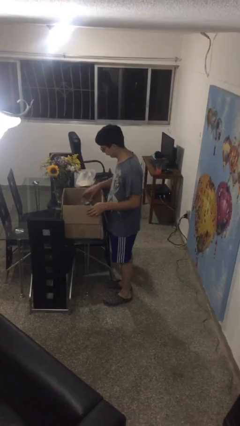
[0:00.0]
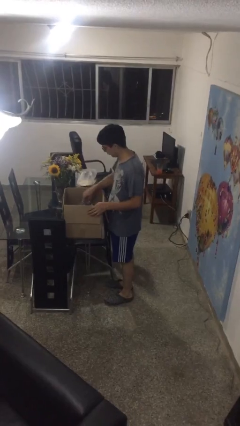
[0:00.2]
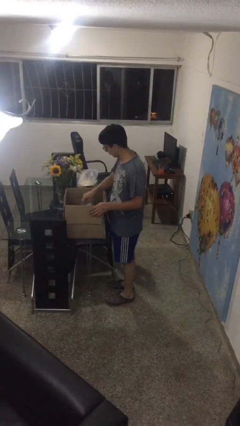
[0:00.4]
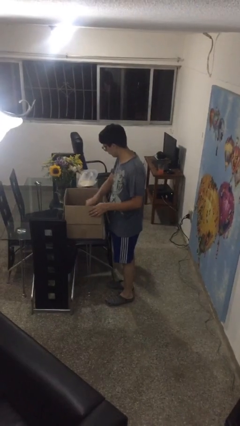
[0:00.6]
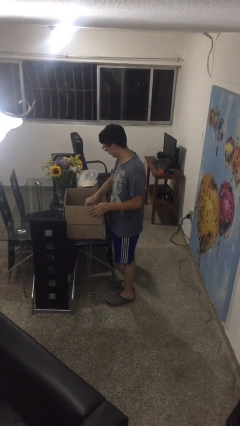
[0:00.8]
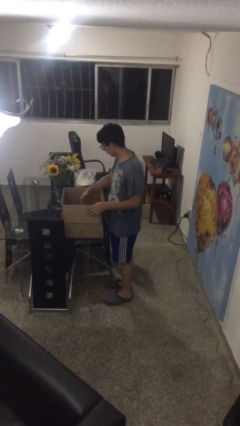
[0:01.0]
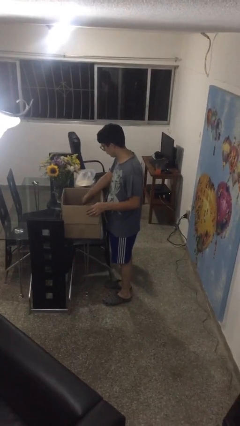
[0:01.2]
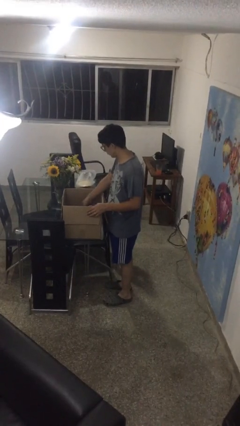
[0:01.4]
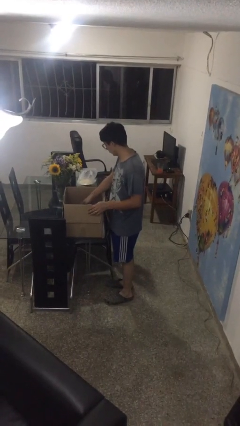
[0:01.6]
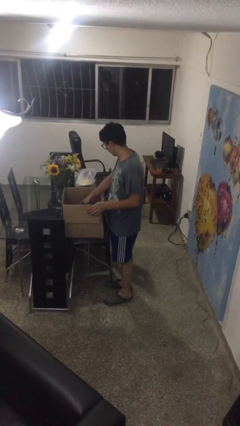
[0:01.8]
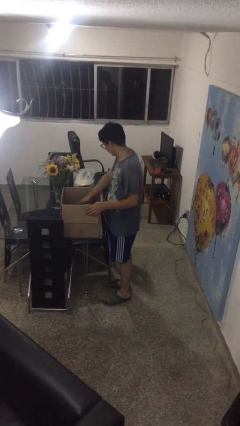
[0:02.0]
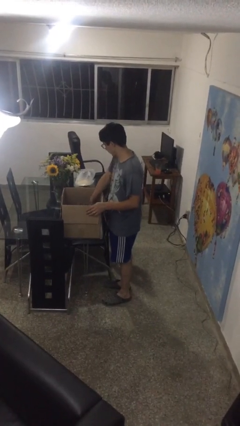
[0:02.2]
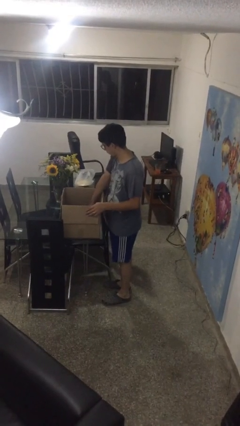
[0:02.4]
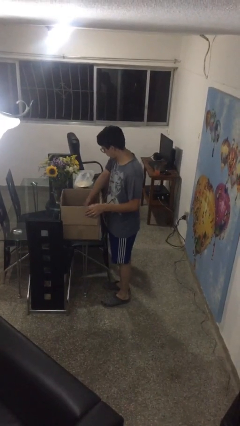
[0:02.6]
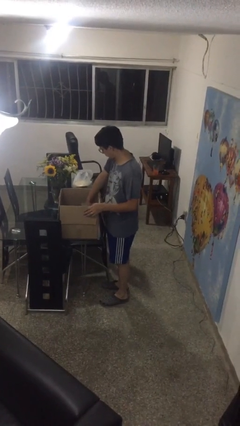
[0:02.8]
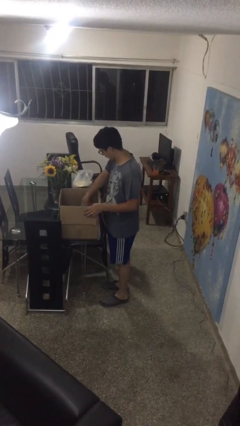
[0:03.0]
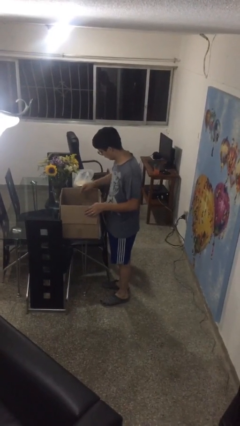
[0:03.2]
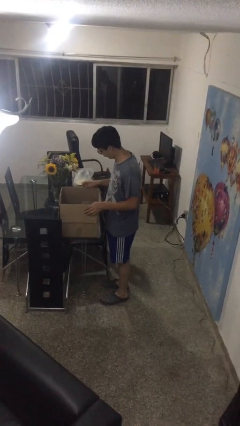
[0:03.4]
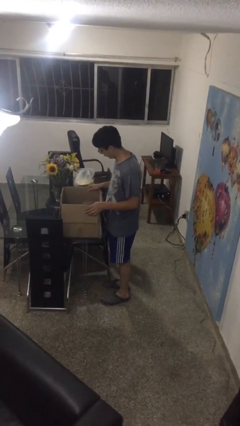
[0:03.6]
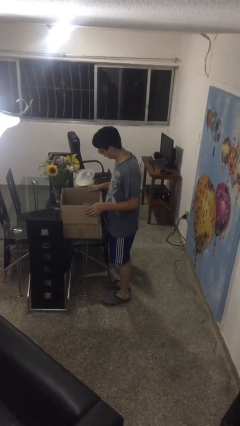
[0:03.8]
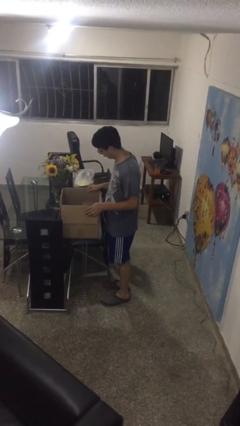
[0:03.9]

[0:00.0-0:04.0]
person searches in box

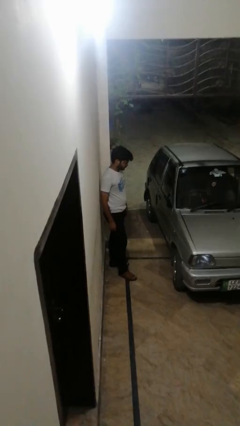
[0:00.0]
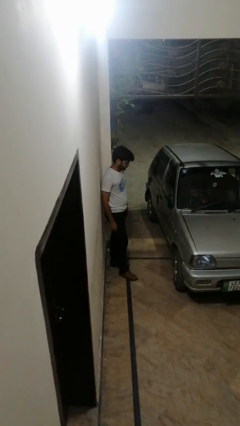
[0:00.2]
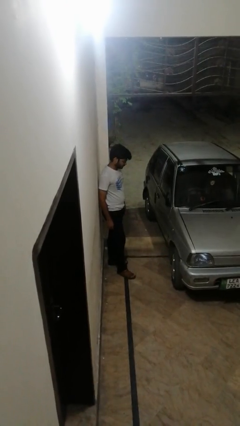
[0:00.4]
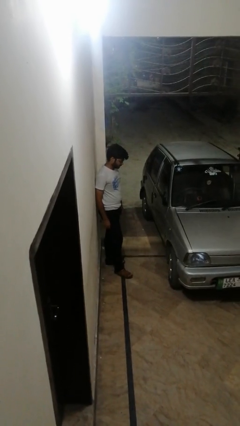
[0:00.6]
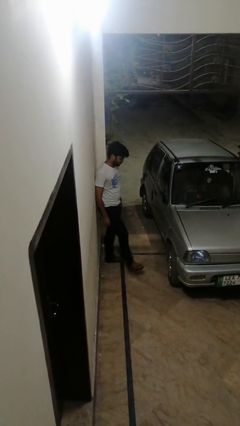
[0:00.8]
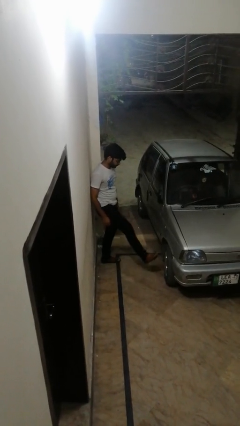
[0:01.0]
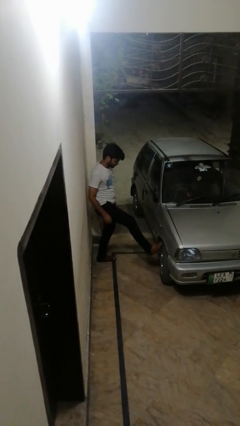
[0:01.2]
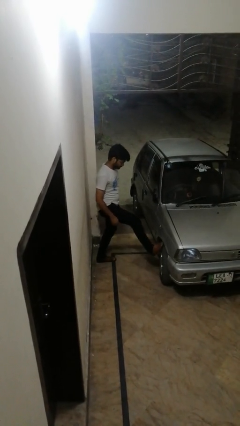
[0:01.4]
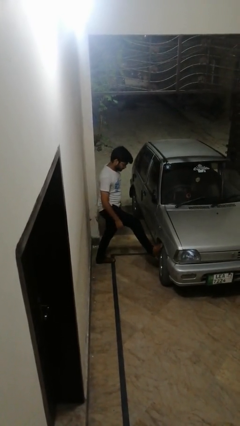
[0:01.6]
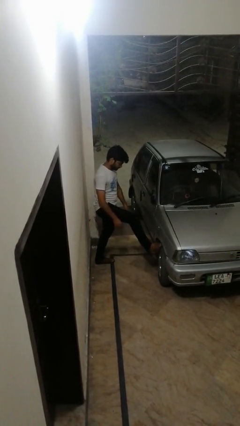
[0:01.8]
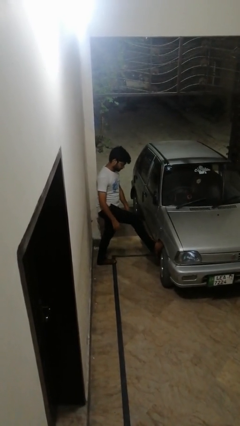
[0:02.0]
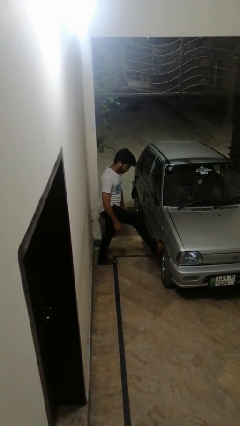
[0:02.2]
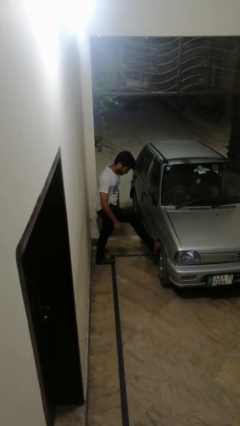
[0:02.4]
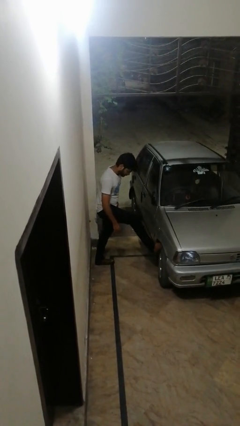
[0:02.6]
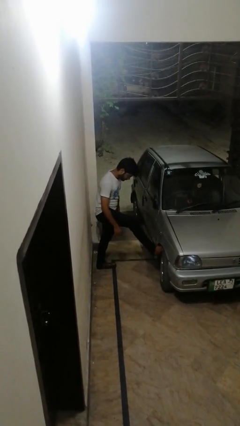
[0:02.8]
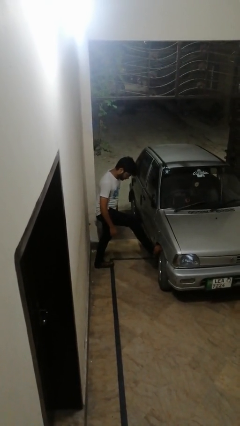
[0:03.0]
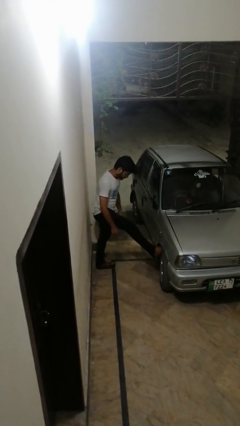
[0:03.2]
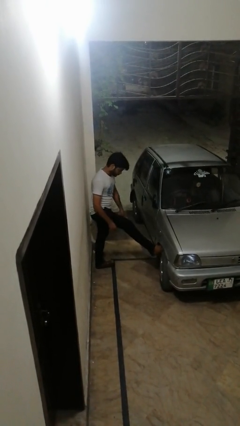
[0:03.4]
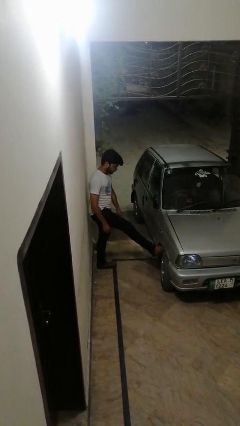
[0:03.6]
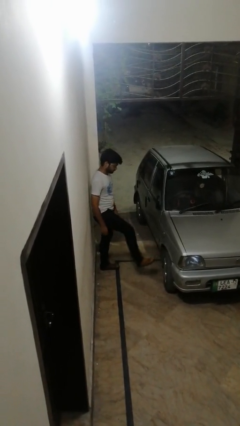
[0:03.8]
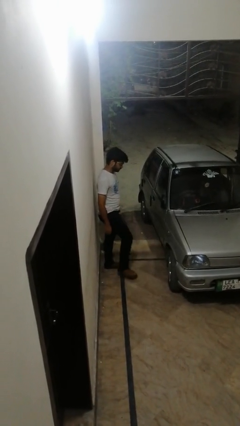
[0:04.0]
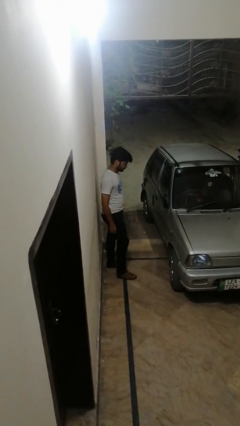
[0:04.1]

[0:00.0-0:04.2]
person kicks car tires

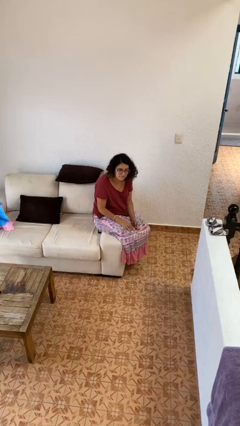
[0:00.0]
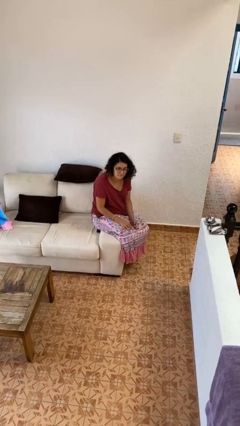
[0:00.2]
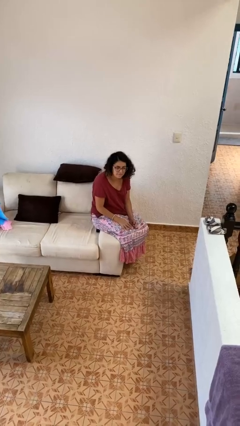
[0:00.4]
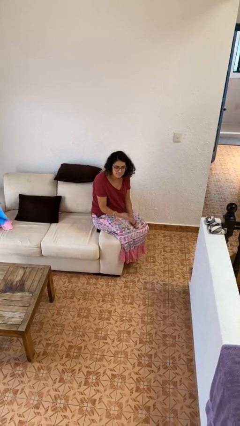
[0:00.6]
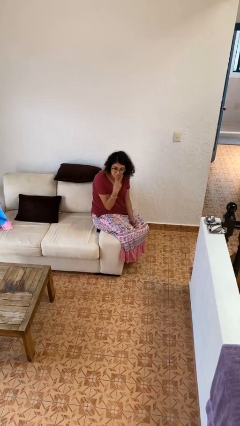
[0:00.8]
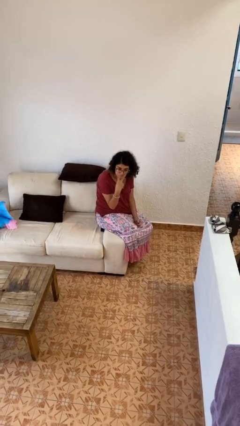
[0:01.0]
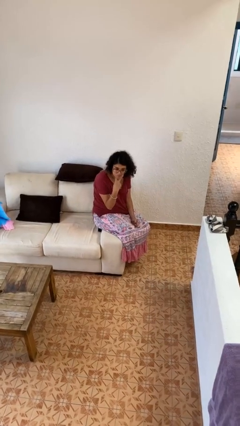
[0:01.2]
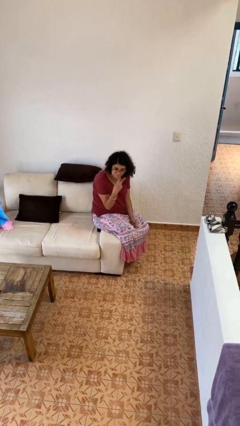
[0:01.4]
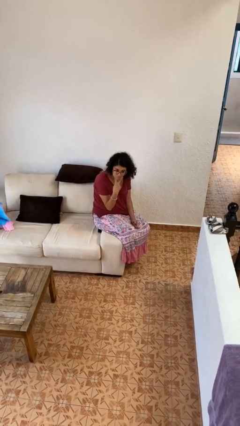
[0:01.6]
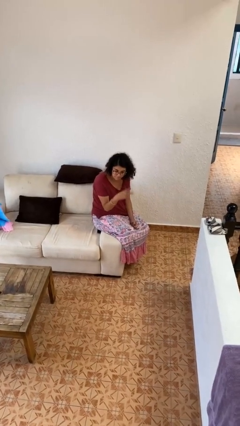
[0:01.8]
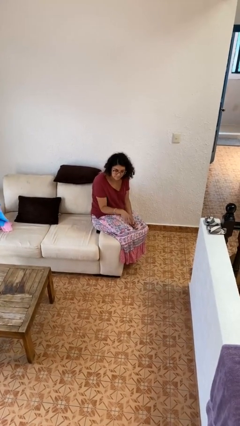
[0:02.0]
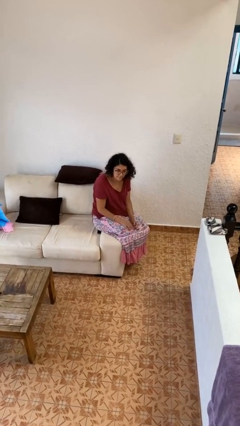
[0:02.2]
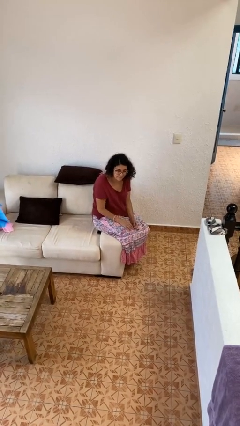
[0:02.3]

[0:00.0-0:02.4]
person gestures watch closely

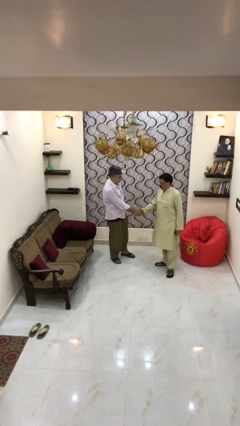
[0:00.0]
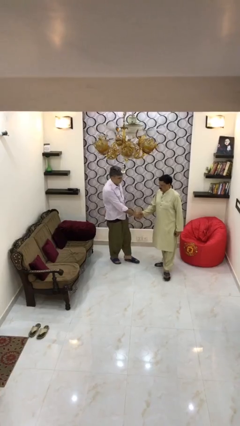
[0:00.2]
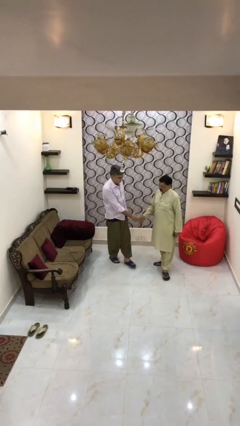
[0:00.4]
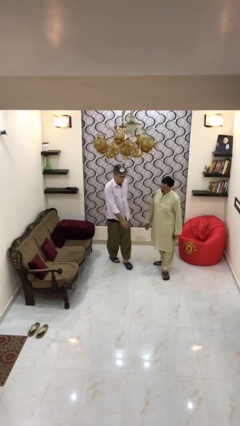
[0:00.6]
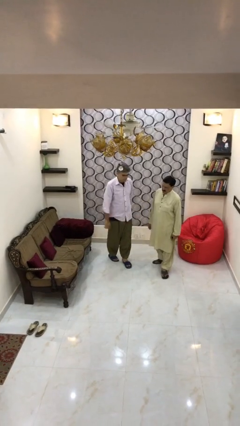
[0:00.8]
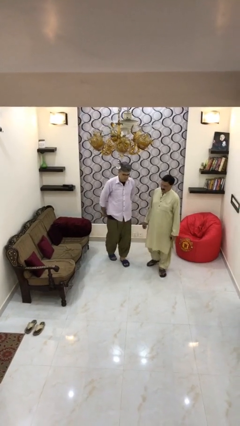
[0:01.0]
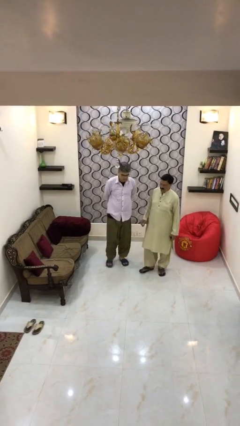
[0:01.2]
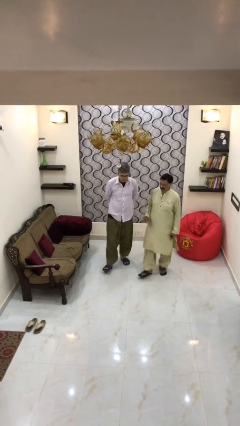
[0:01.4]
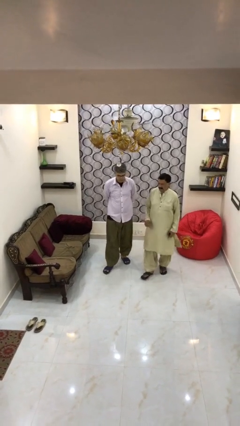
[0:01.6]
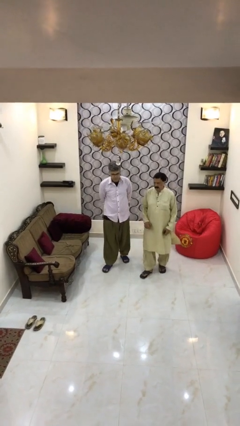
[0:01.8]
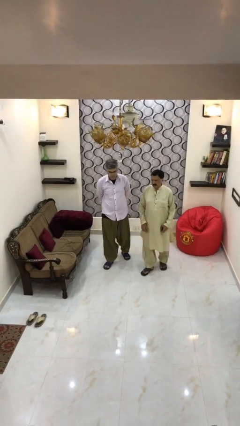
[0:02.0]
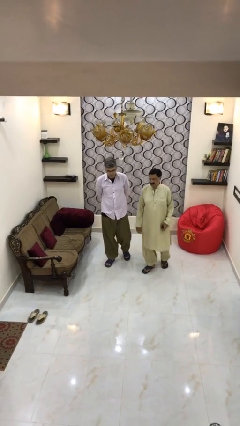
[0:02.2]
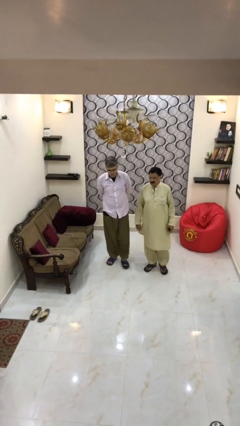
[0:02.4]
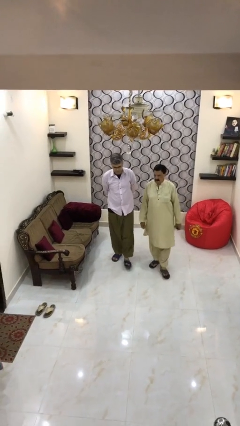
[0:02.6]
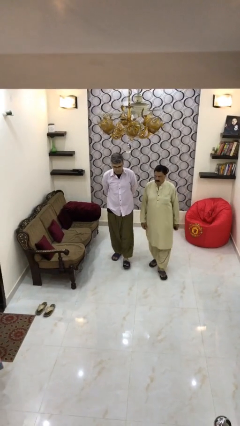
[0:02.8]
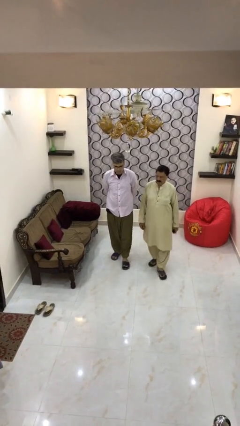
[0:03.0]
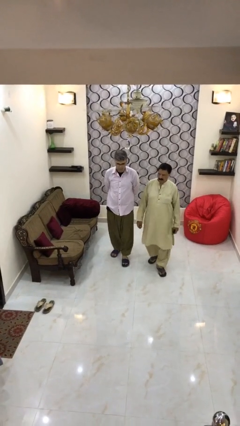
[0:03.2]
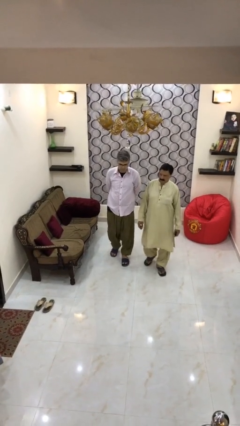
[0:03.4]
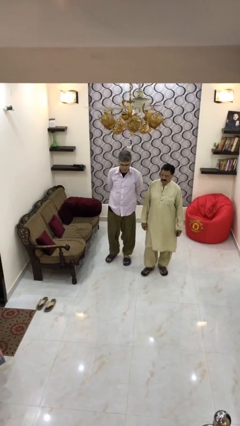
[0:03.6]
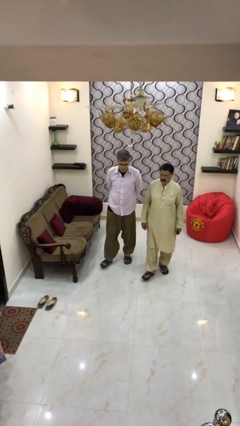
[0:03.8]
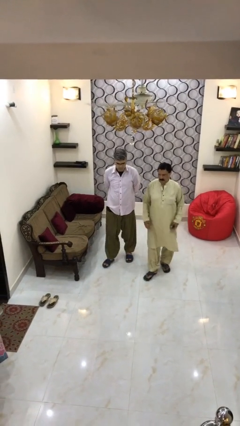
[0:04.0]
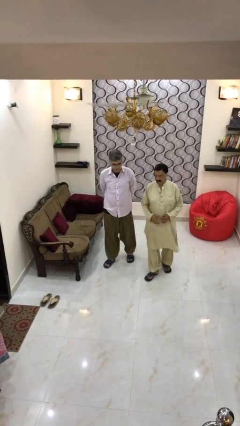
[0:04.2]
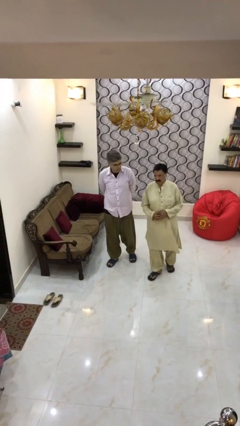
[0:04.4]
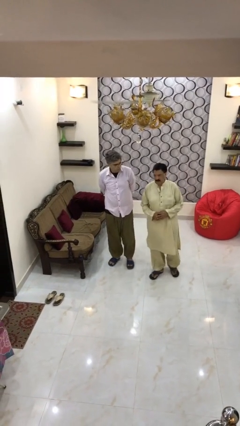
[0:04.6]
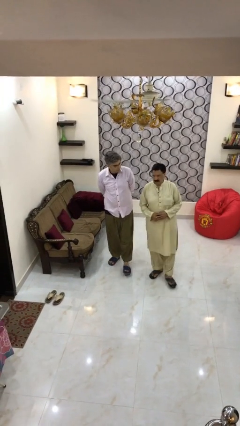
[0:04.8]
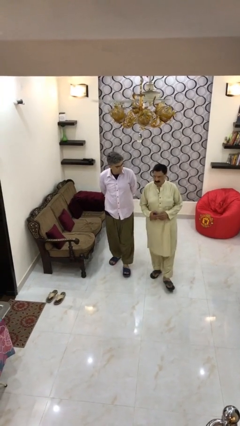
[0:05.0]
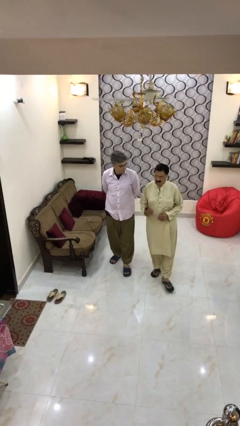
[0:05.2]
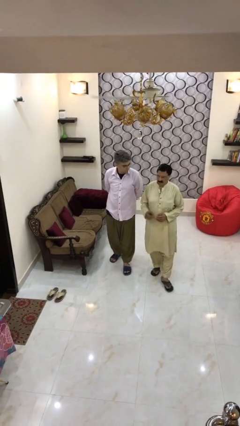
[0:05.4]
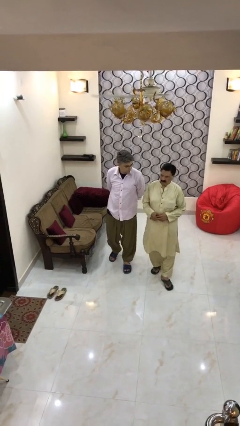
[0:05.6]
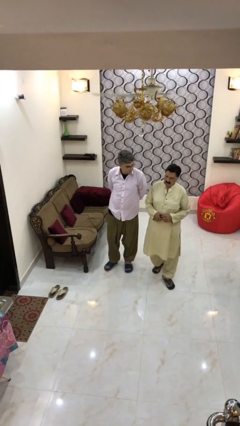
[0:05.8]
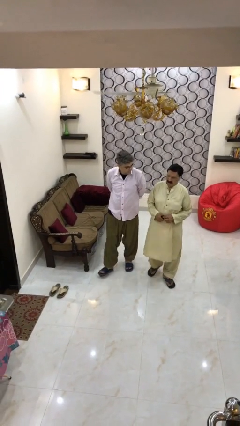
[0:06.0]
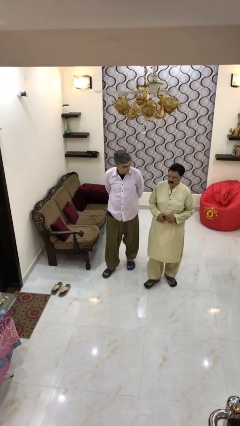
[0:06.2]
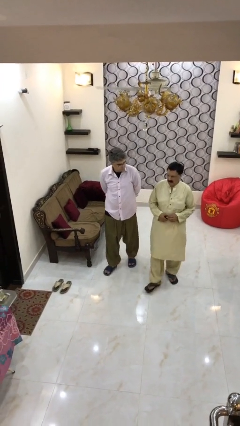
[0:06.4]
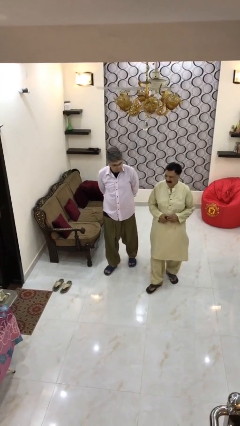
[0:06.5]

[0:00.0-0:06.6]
person talks to person

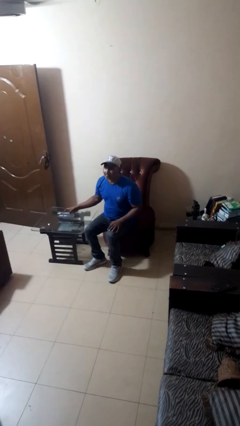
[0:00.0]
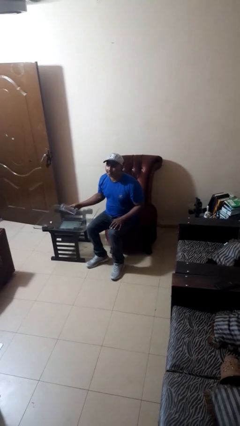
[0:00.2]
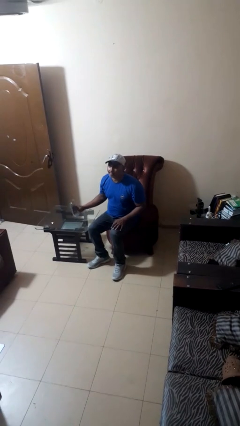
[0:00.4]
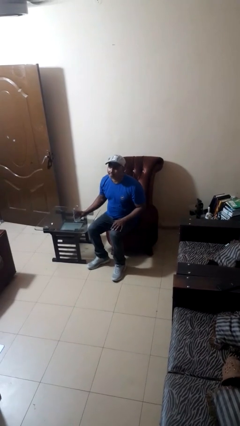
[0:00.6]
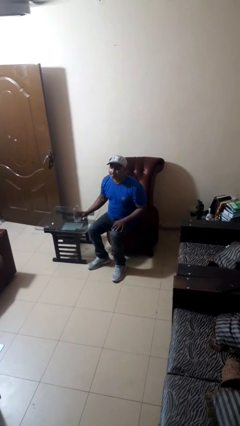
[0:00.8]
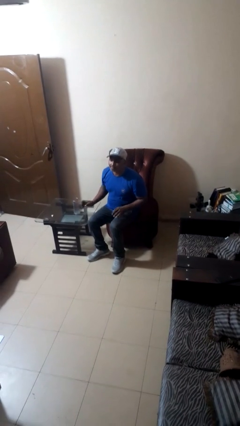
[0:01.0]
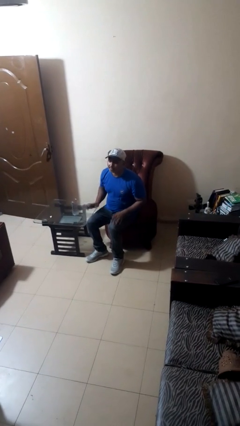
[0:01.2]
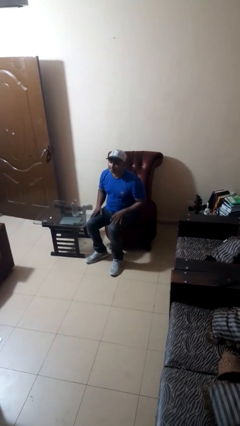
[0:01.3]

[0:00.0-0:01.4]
person sets upright glass
